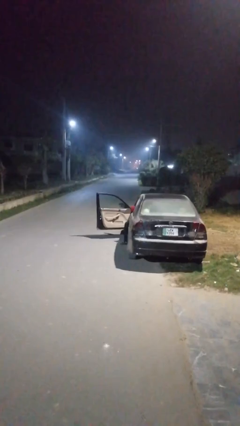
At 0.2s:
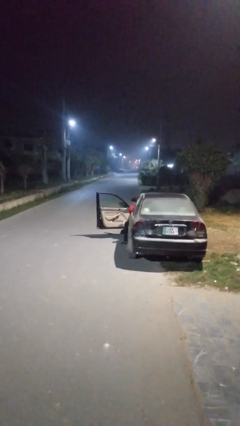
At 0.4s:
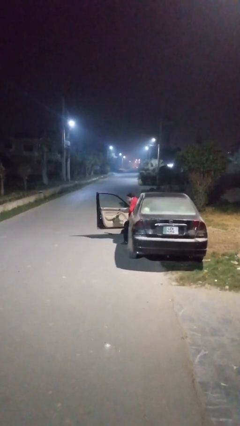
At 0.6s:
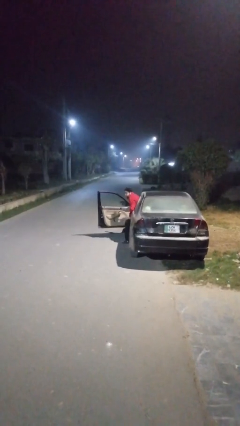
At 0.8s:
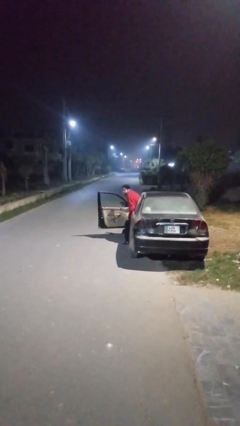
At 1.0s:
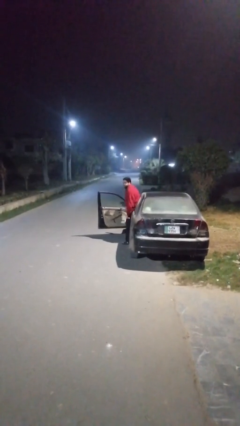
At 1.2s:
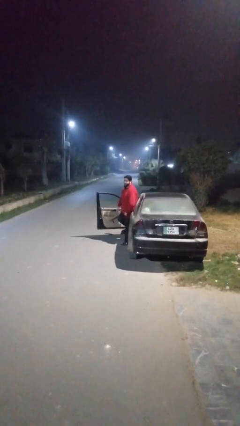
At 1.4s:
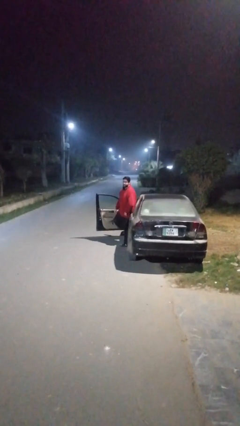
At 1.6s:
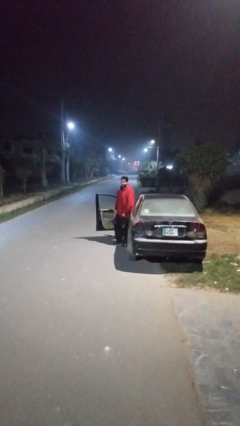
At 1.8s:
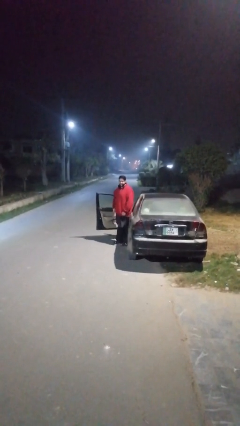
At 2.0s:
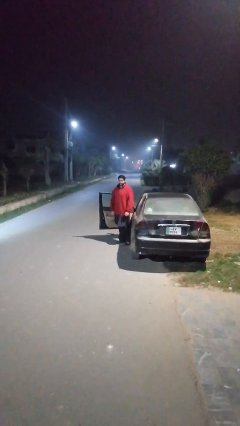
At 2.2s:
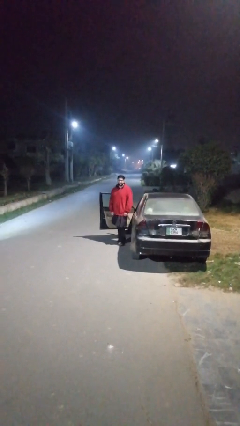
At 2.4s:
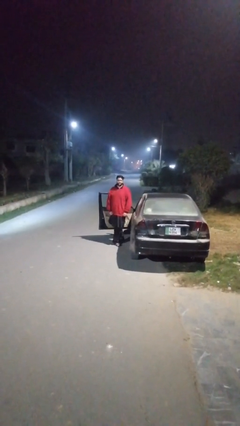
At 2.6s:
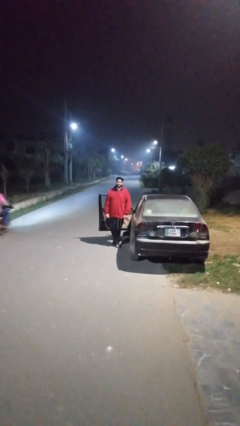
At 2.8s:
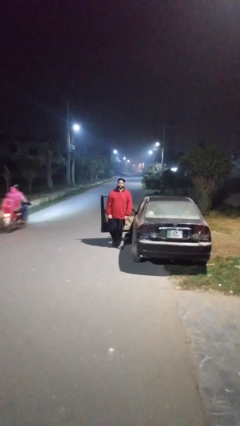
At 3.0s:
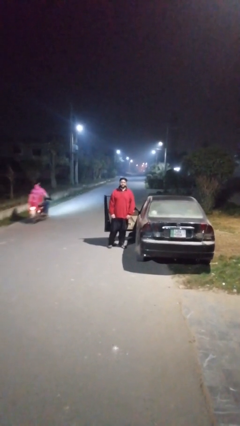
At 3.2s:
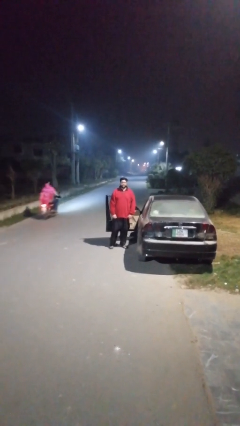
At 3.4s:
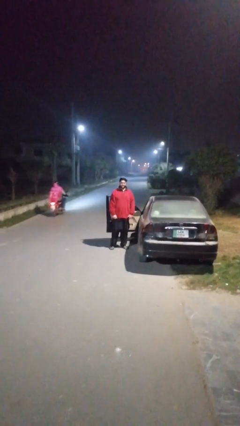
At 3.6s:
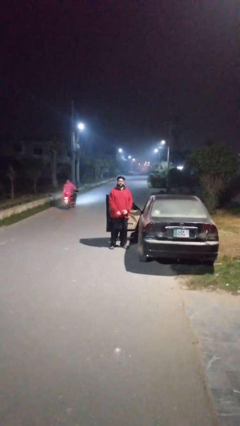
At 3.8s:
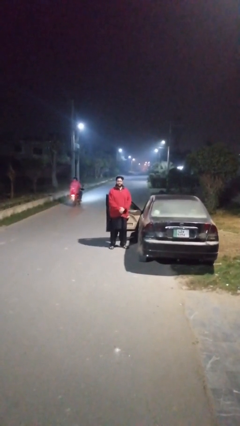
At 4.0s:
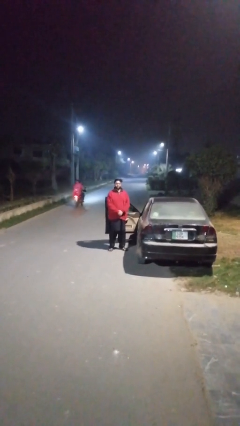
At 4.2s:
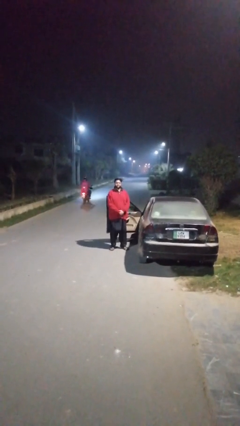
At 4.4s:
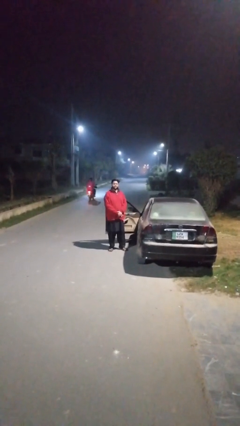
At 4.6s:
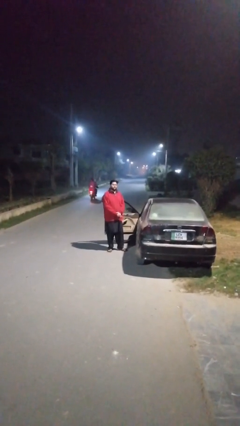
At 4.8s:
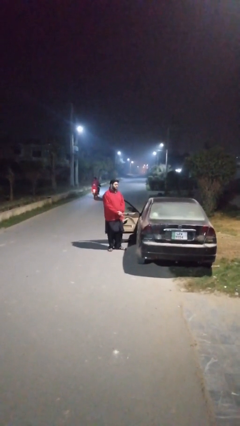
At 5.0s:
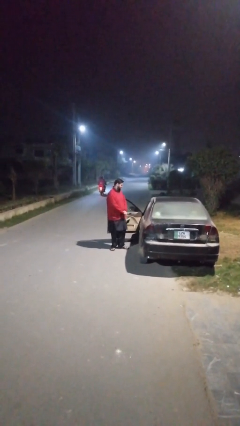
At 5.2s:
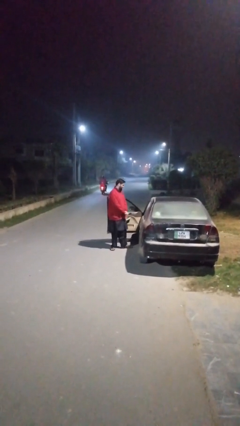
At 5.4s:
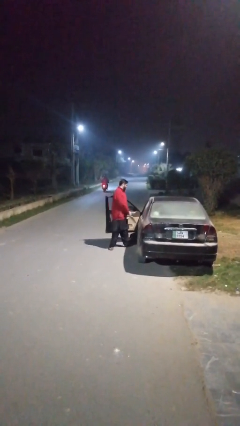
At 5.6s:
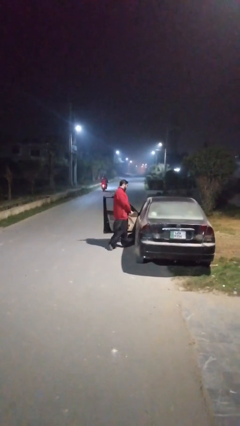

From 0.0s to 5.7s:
person exits car

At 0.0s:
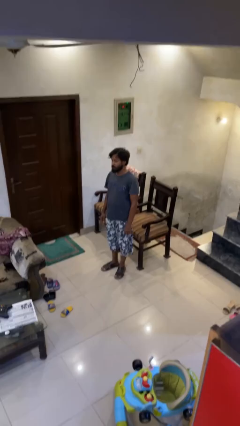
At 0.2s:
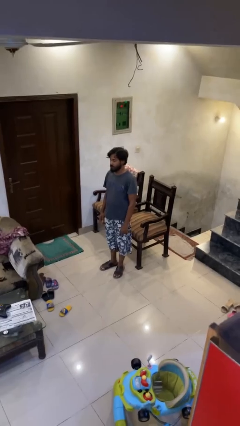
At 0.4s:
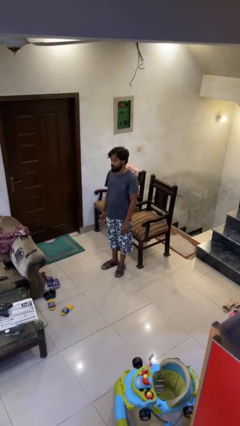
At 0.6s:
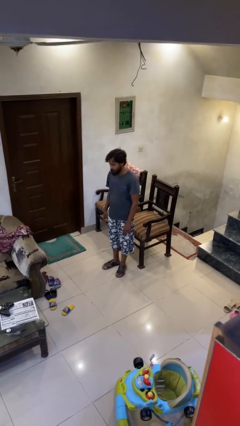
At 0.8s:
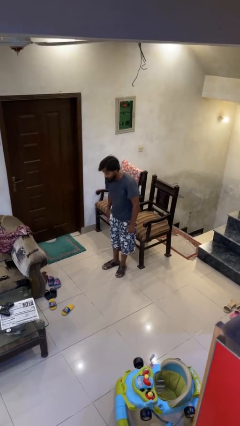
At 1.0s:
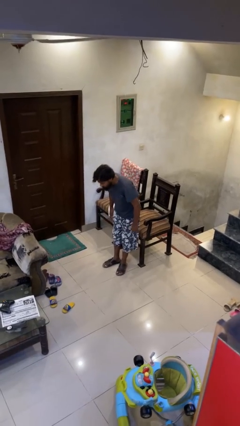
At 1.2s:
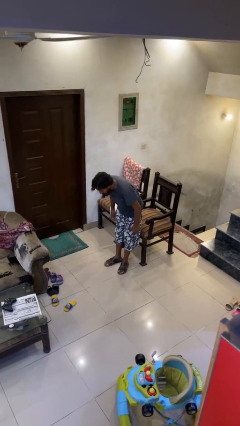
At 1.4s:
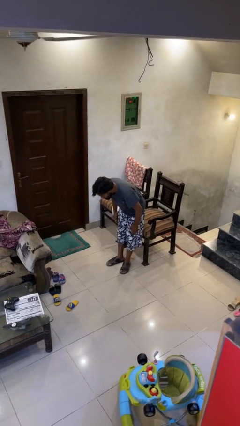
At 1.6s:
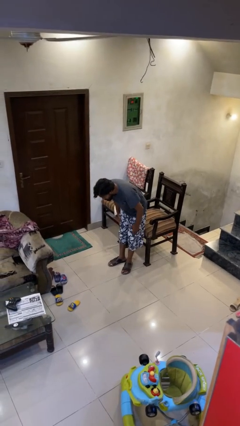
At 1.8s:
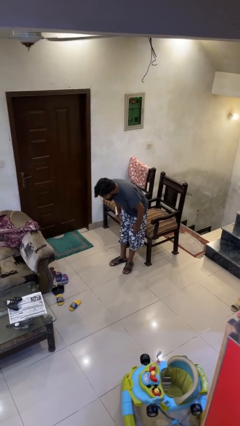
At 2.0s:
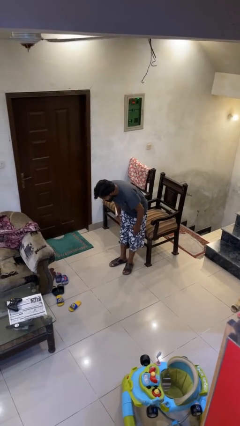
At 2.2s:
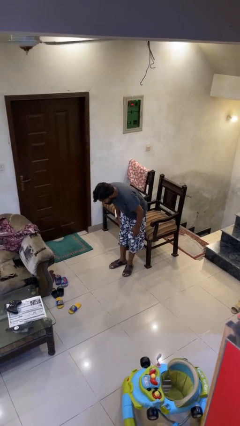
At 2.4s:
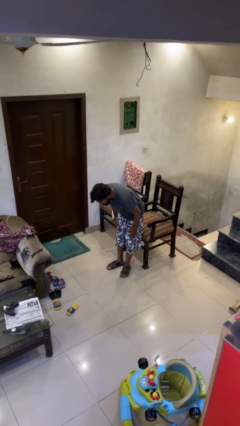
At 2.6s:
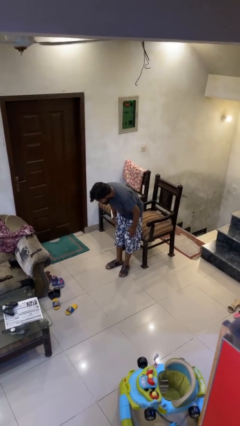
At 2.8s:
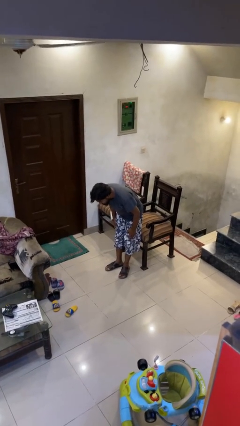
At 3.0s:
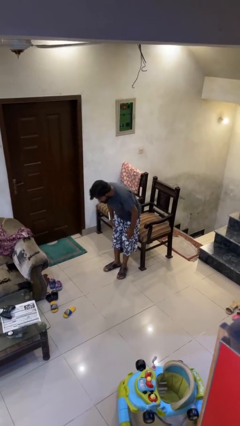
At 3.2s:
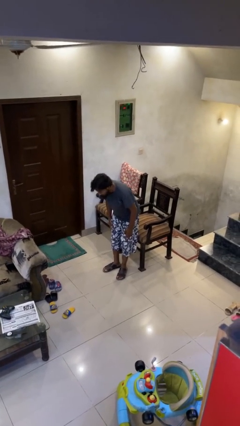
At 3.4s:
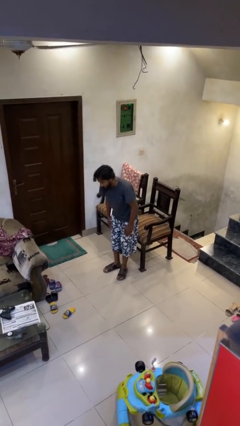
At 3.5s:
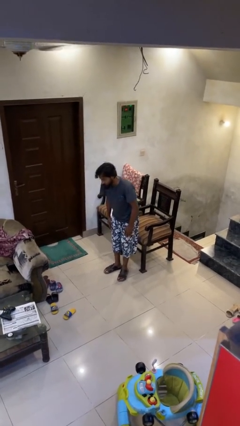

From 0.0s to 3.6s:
person bows

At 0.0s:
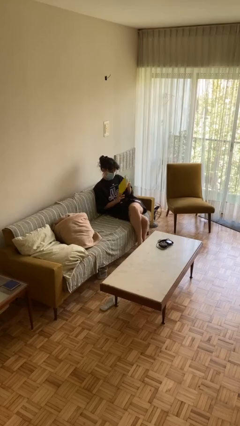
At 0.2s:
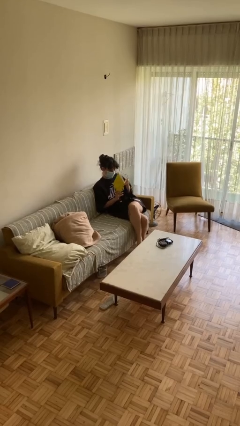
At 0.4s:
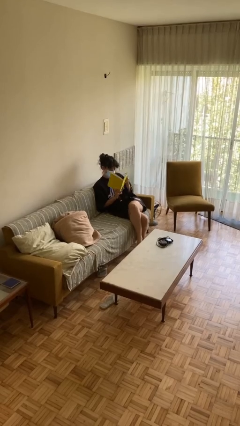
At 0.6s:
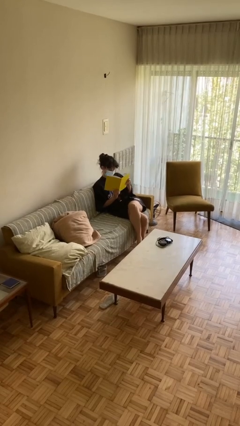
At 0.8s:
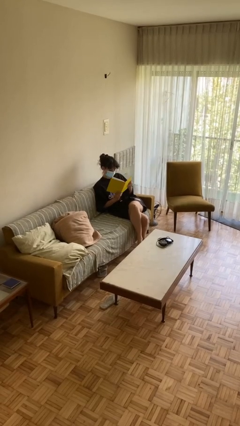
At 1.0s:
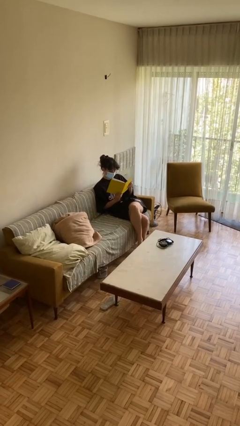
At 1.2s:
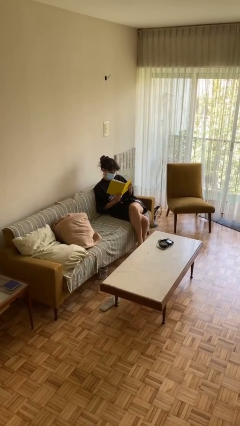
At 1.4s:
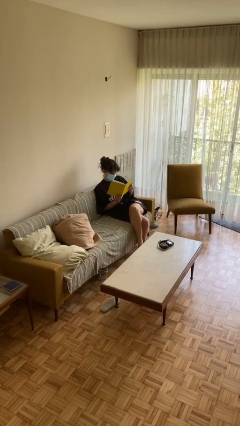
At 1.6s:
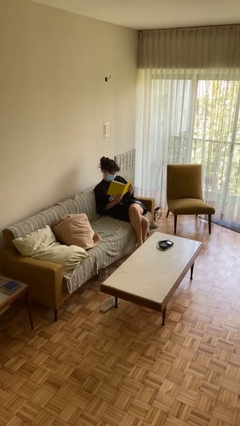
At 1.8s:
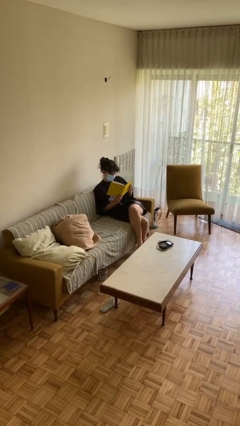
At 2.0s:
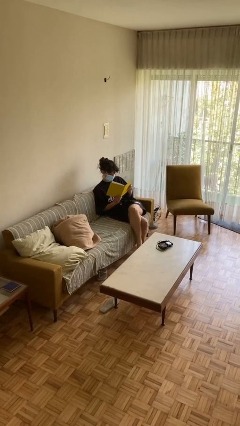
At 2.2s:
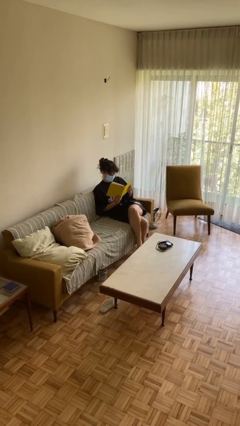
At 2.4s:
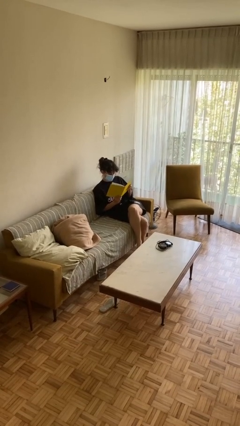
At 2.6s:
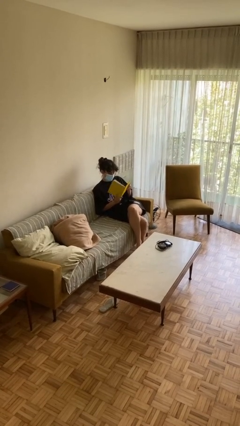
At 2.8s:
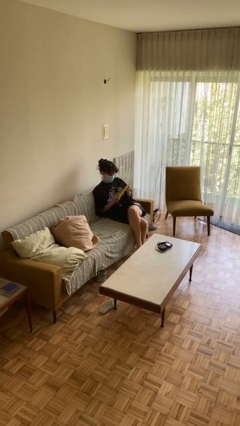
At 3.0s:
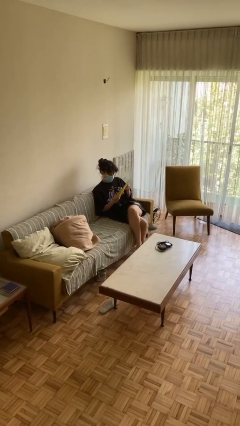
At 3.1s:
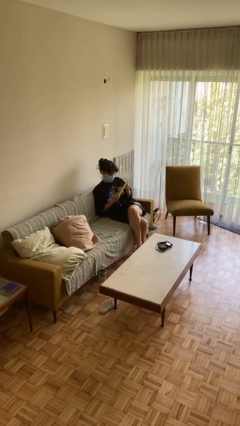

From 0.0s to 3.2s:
person reads document

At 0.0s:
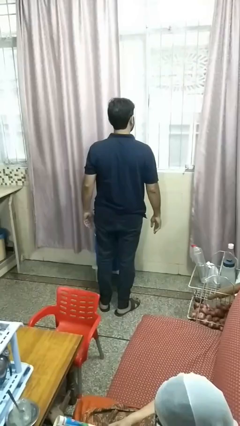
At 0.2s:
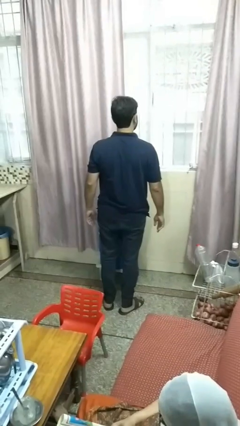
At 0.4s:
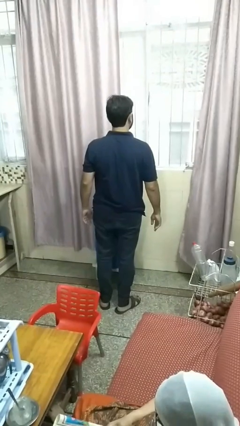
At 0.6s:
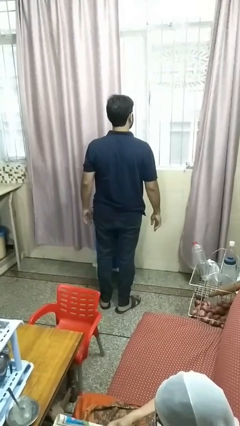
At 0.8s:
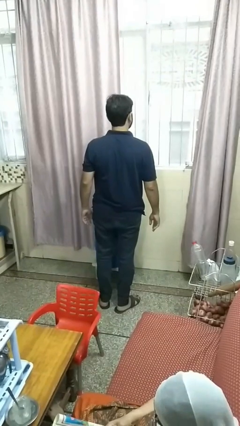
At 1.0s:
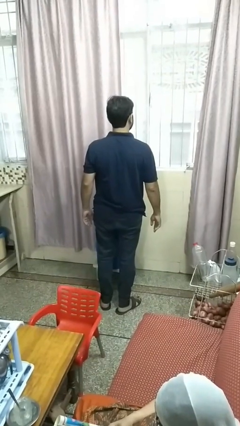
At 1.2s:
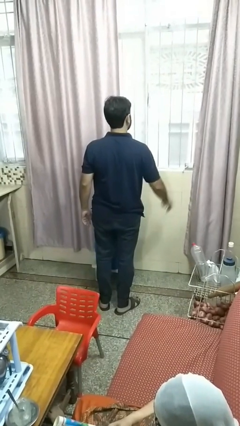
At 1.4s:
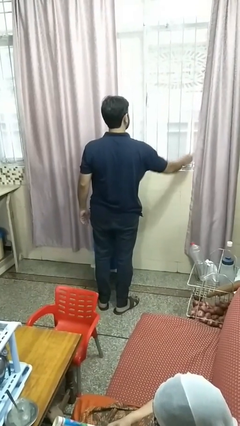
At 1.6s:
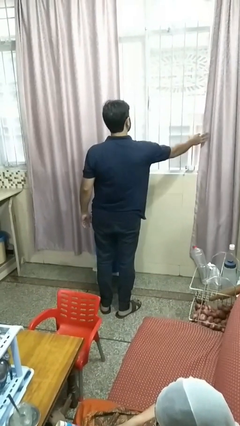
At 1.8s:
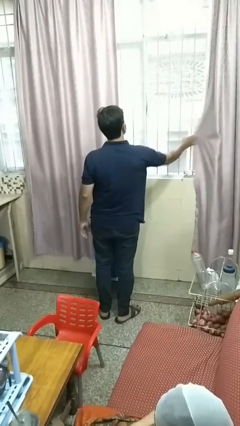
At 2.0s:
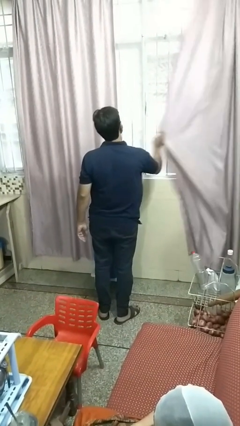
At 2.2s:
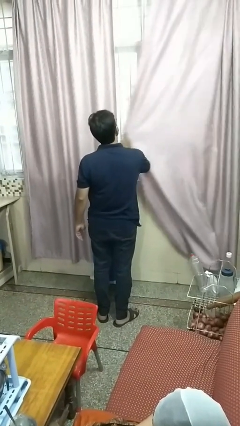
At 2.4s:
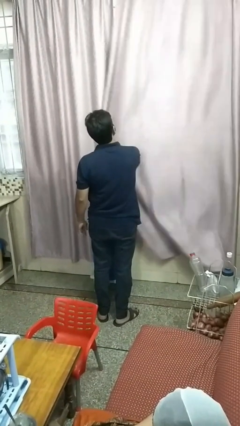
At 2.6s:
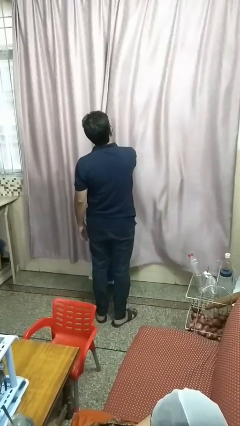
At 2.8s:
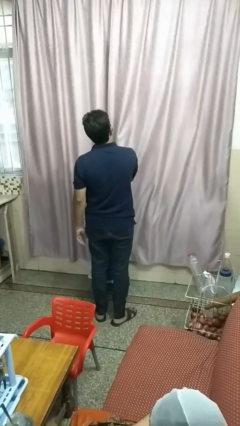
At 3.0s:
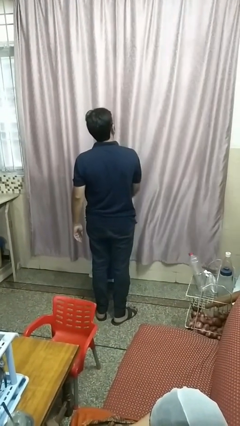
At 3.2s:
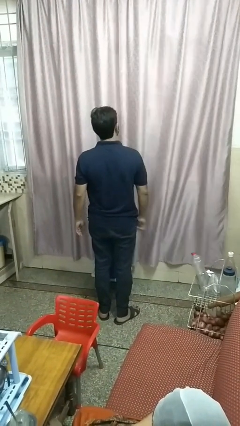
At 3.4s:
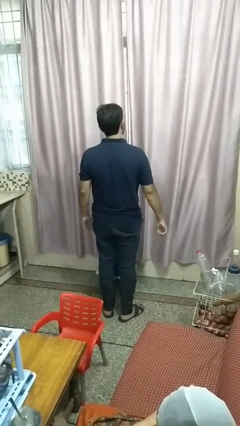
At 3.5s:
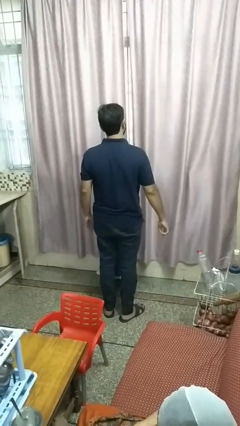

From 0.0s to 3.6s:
person closes curtains

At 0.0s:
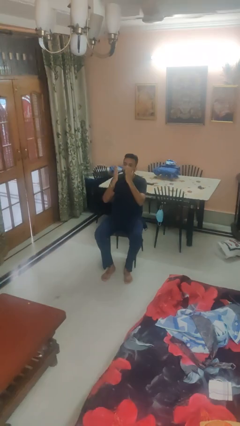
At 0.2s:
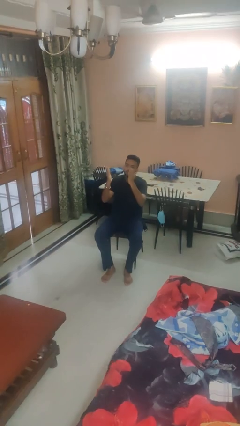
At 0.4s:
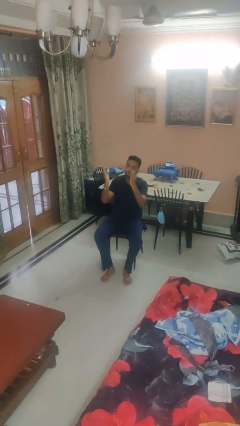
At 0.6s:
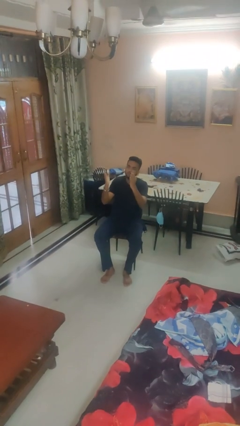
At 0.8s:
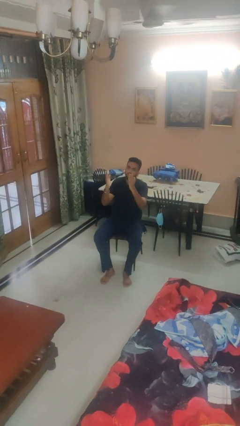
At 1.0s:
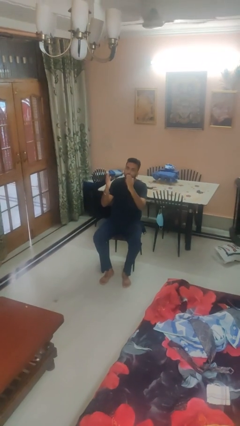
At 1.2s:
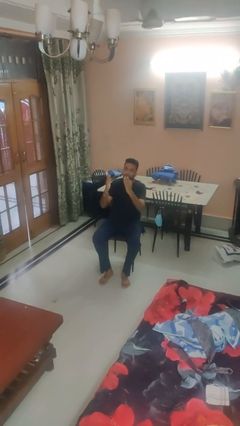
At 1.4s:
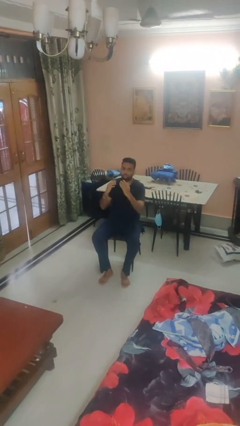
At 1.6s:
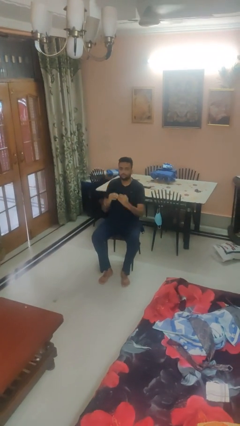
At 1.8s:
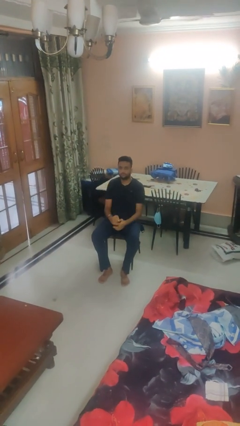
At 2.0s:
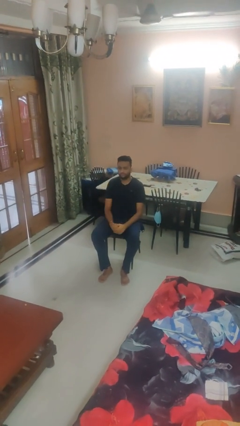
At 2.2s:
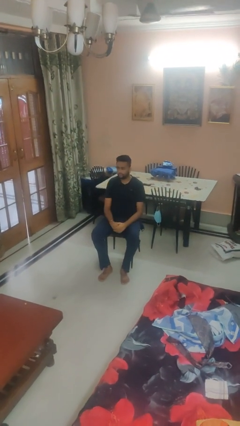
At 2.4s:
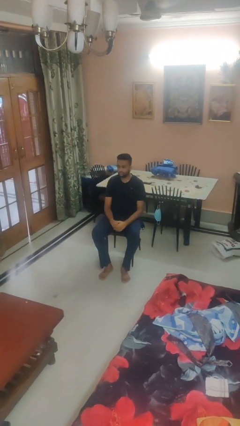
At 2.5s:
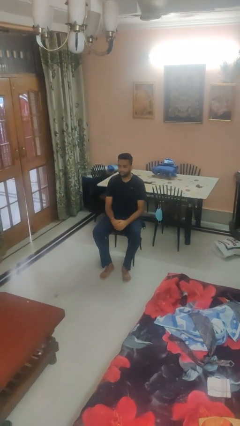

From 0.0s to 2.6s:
person gestures blow kiss
